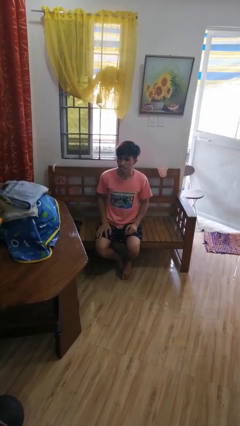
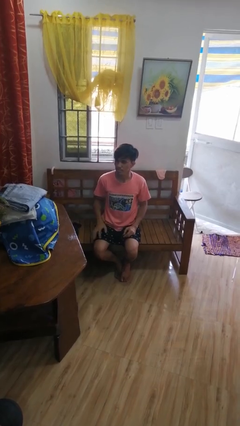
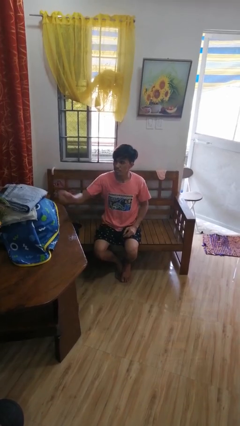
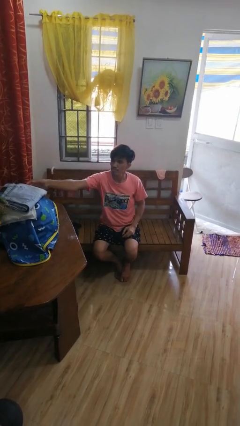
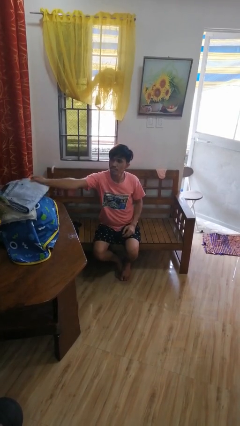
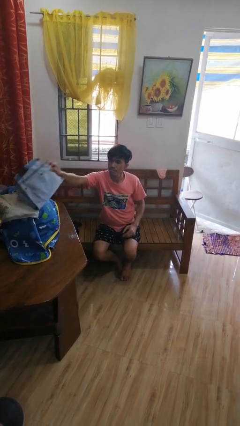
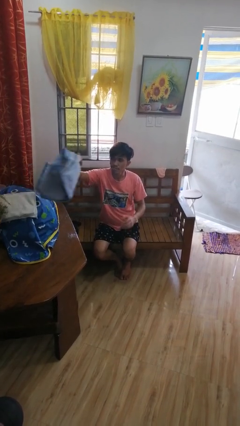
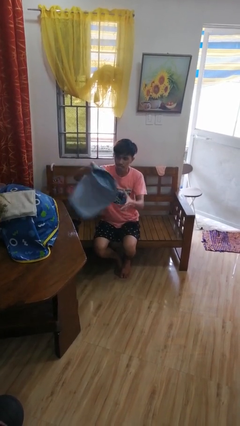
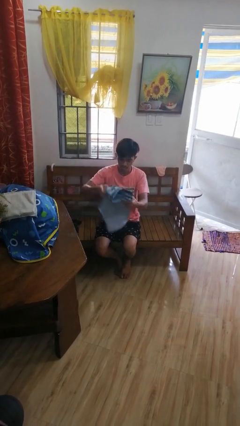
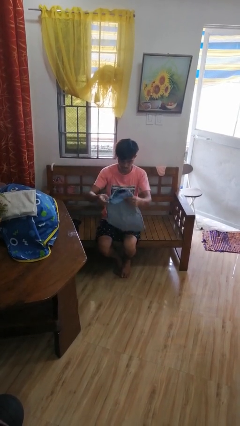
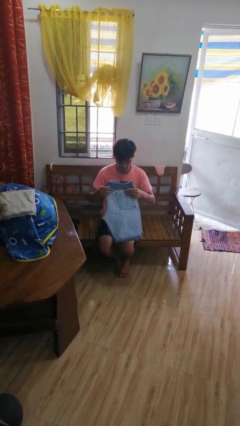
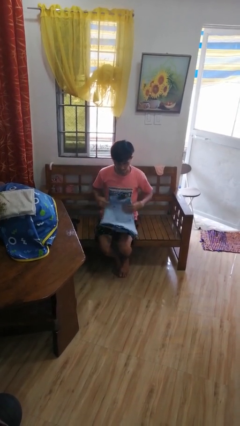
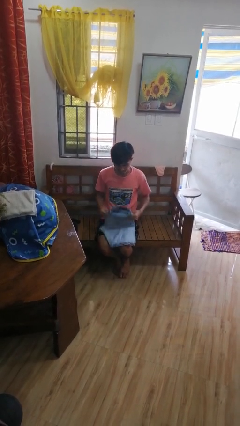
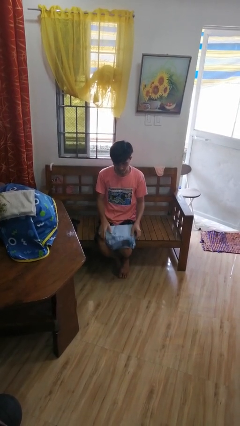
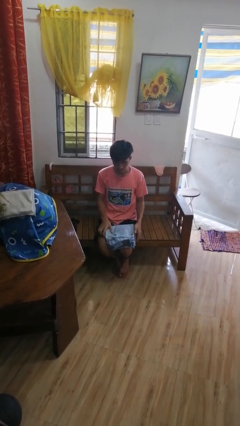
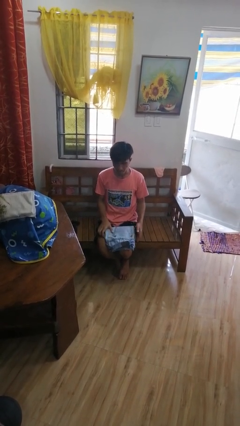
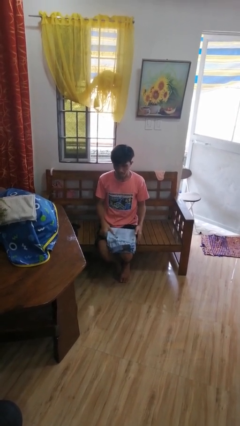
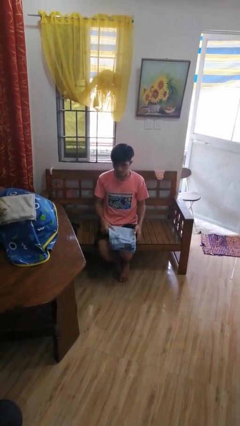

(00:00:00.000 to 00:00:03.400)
person folds pants

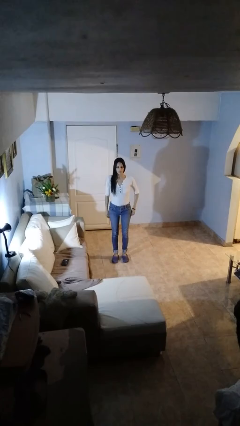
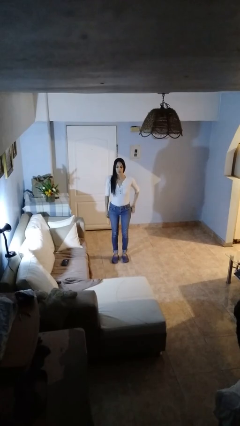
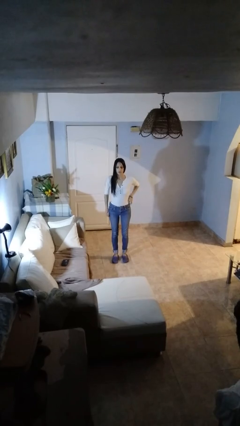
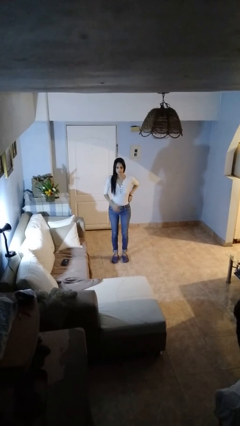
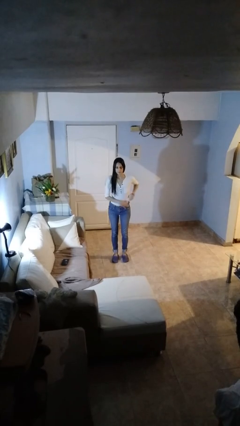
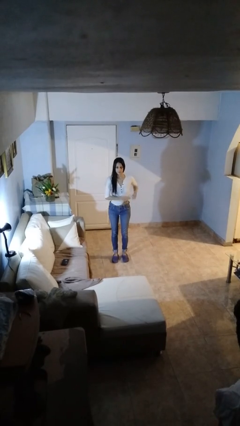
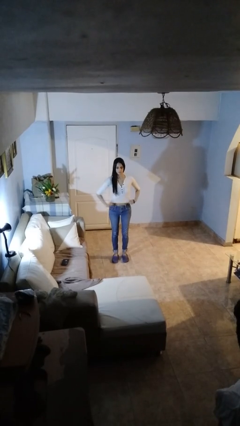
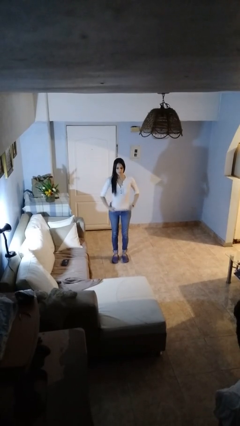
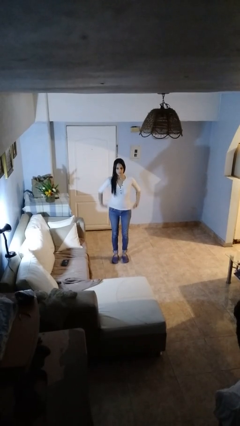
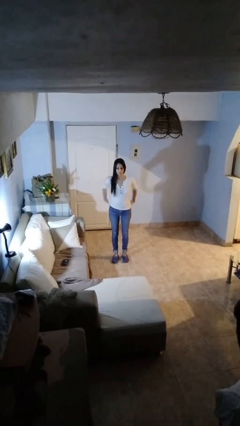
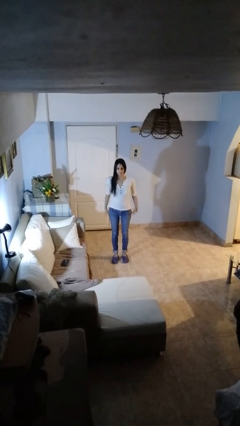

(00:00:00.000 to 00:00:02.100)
person untucks shirt

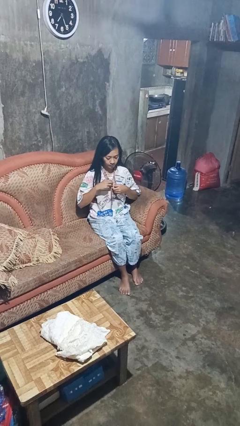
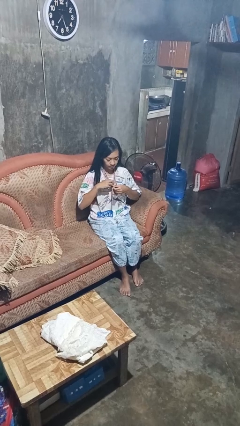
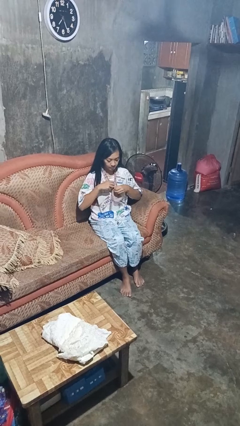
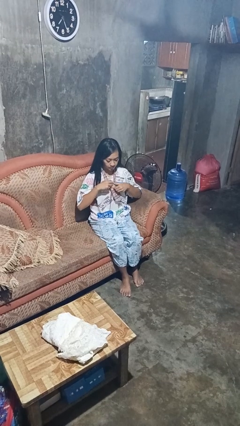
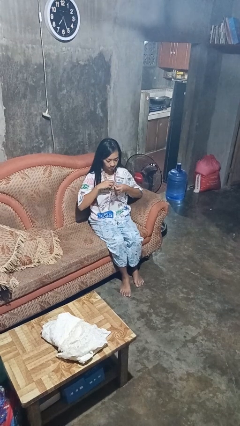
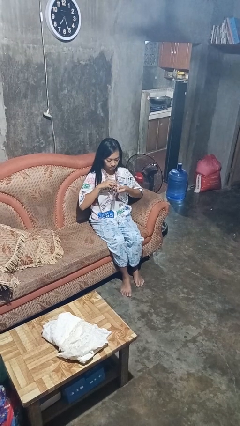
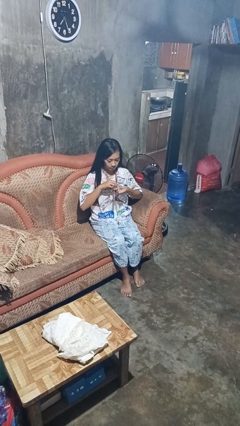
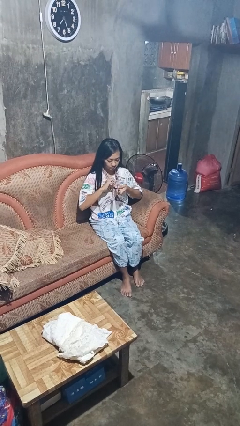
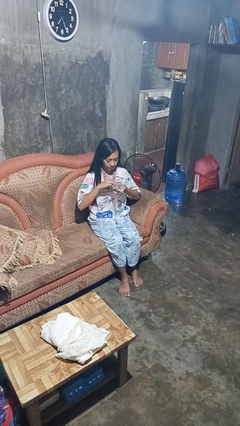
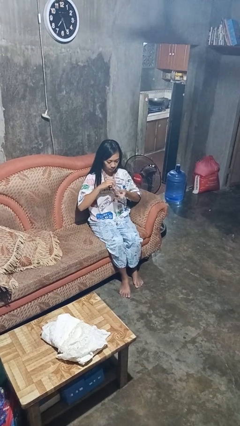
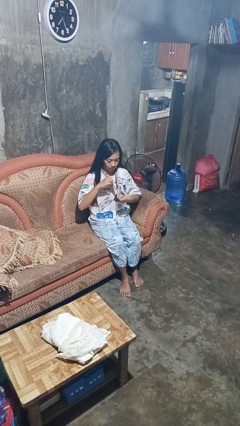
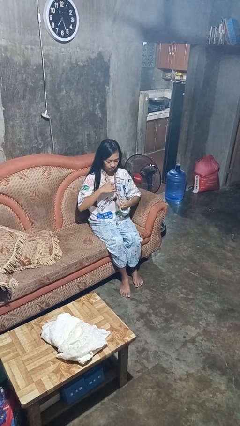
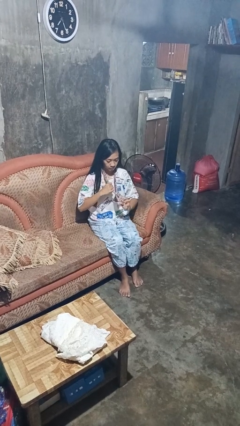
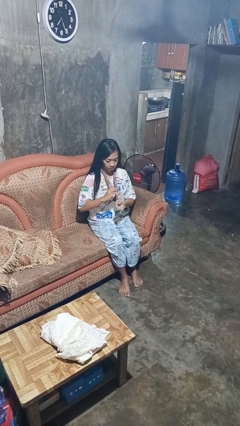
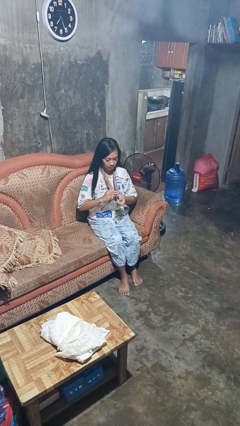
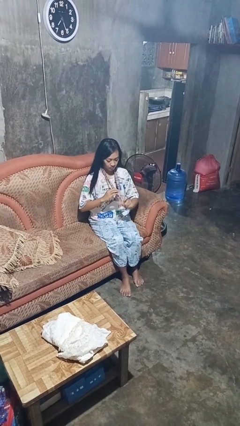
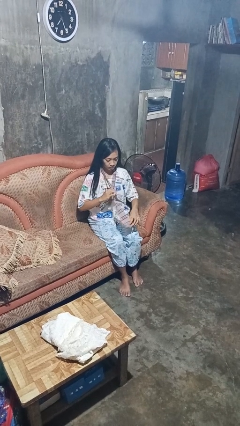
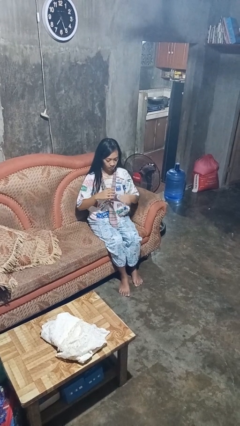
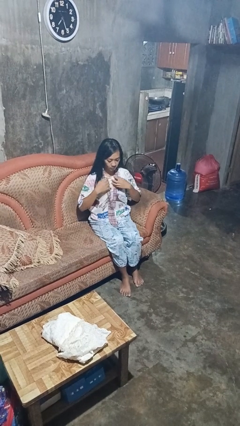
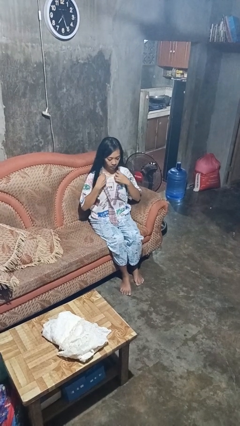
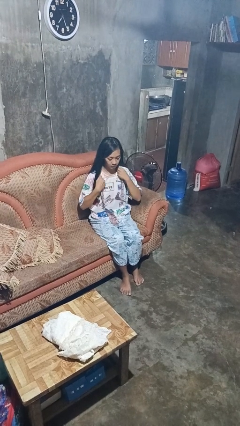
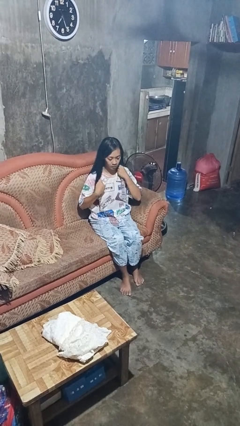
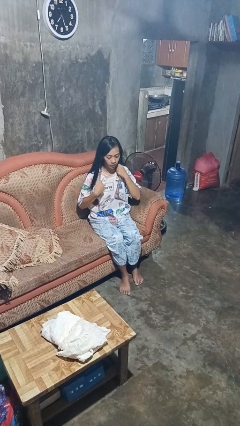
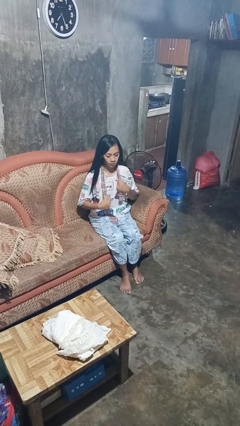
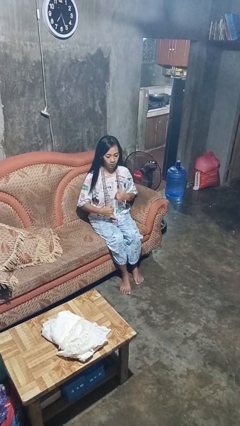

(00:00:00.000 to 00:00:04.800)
person takes off necktie

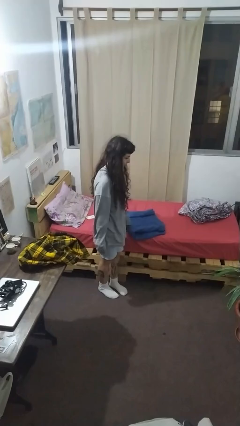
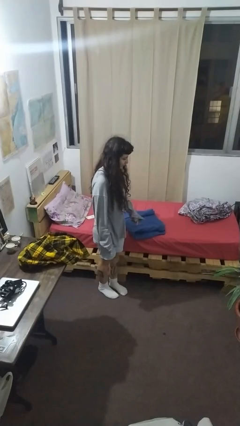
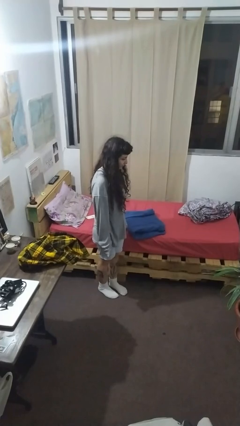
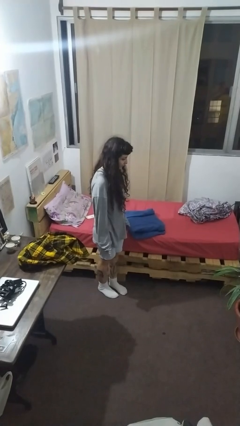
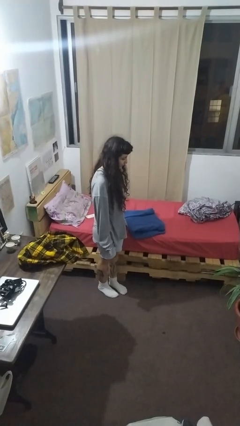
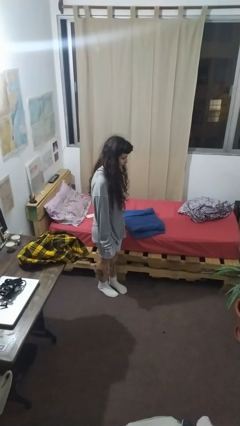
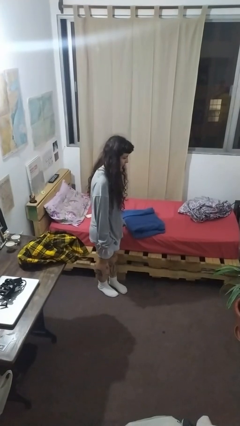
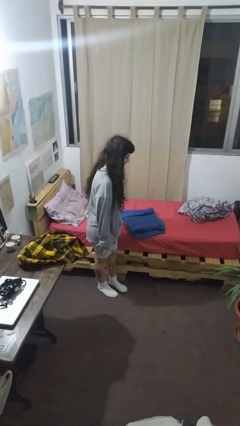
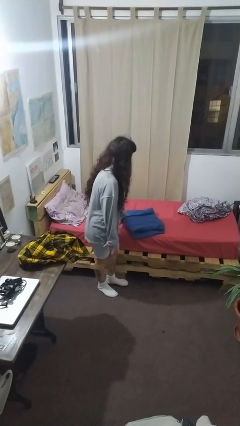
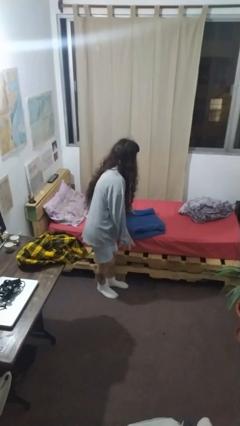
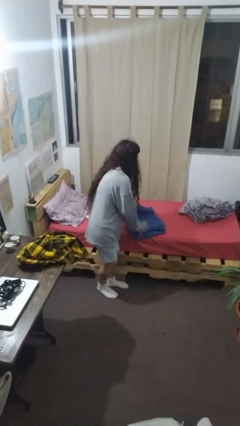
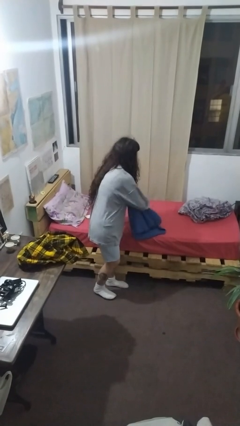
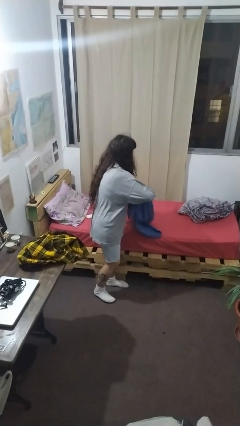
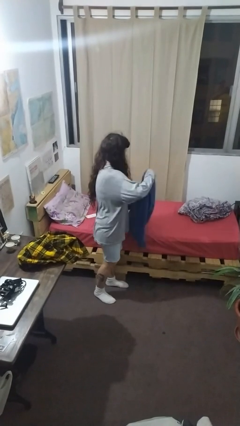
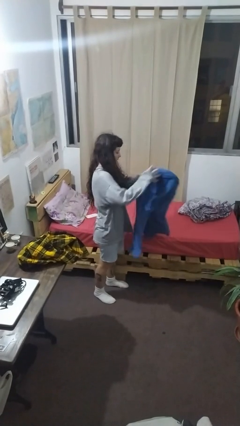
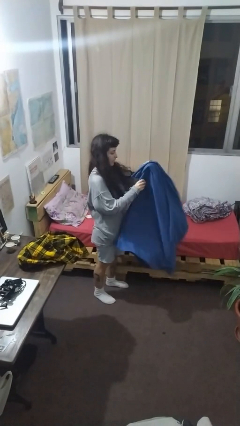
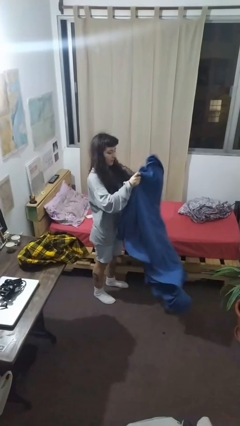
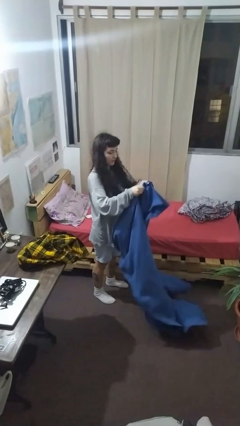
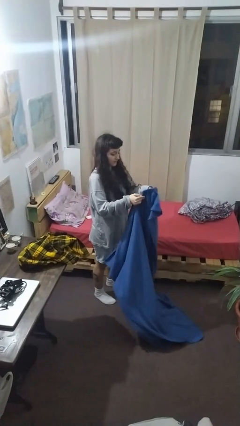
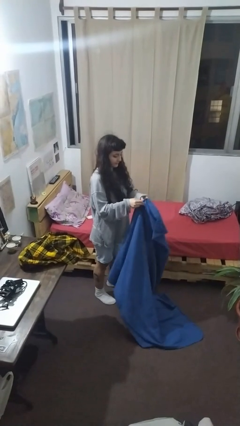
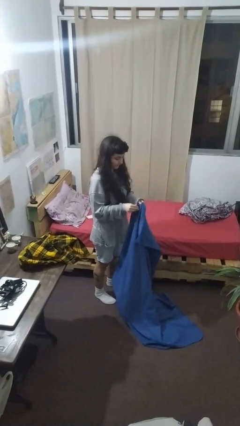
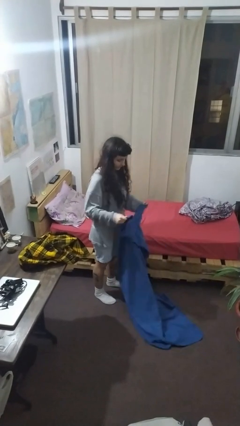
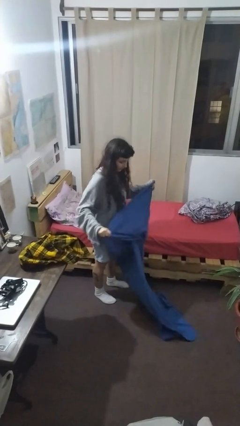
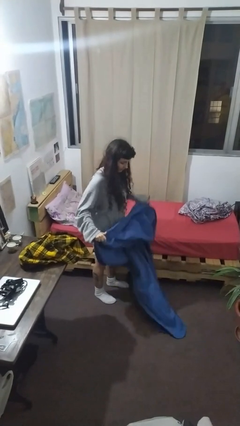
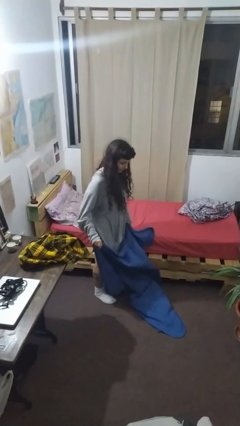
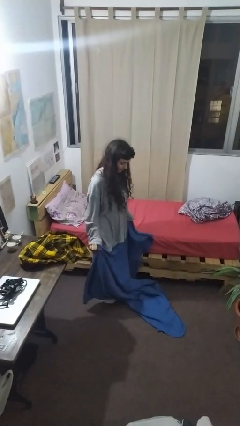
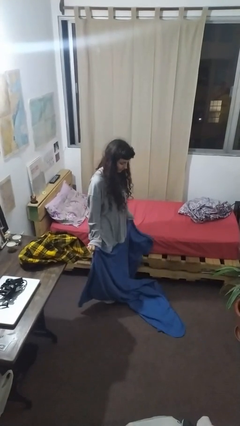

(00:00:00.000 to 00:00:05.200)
person unfolds blanket

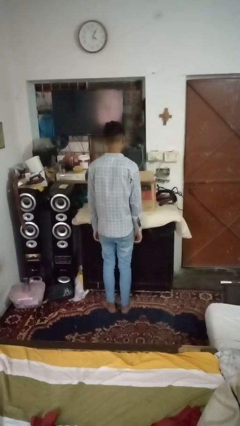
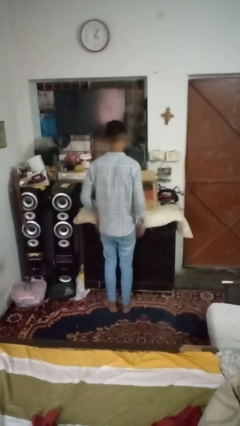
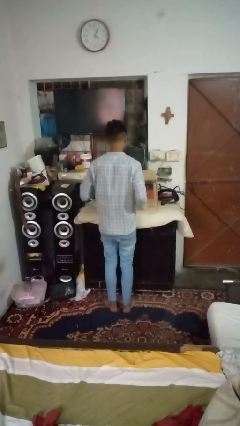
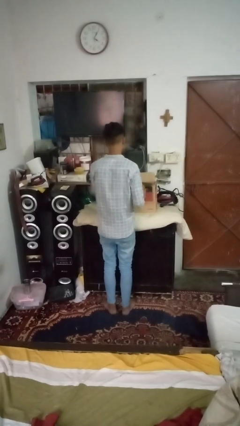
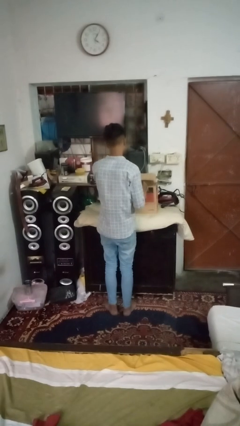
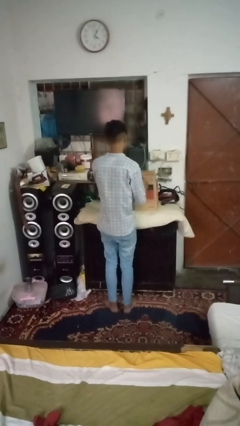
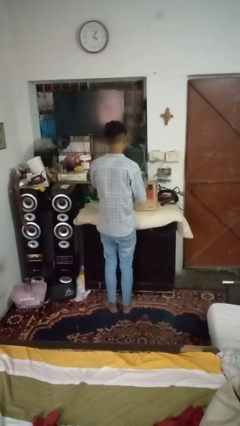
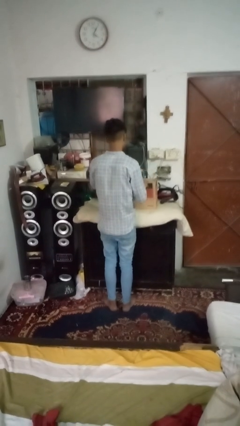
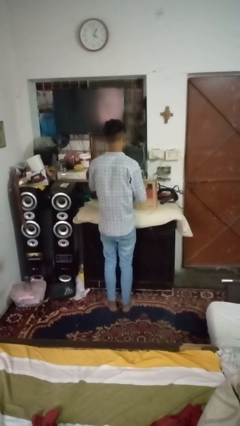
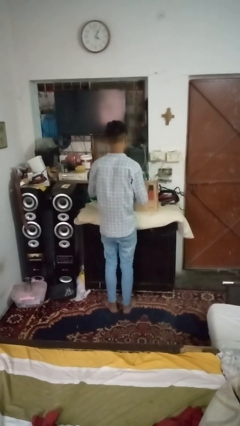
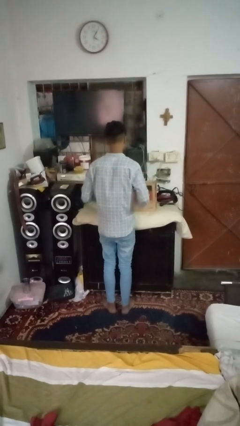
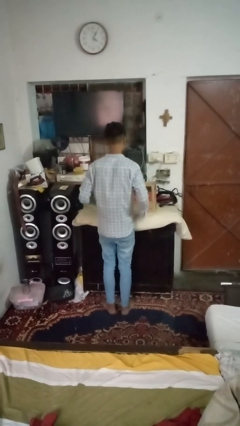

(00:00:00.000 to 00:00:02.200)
person closes box
